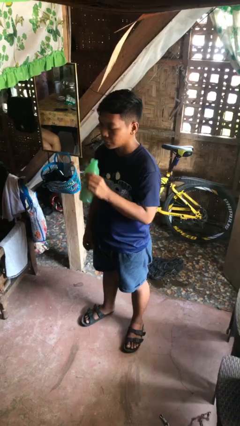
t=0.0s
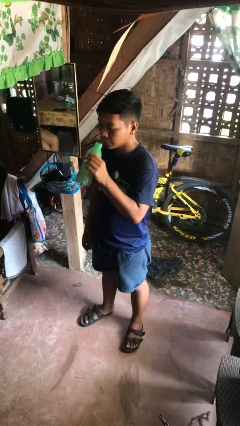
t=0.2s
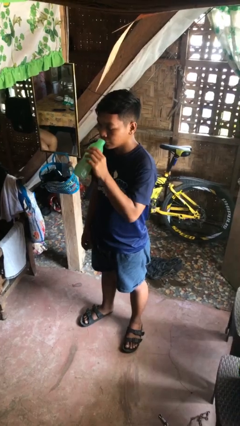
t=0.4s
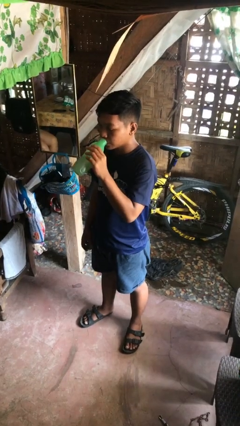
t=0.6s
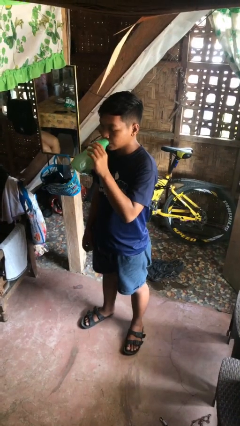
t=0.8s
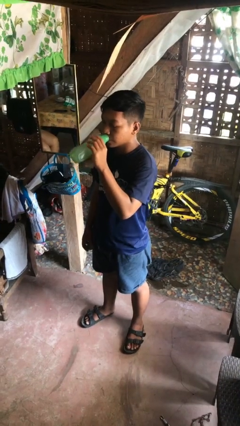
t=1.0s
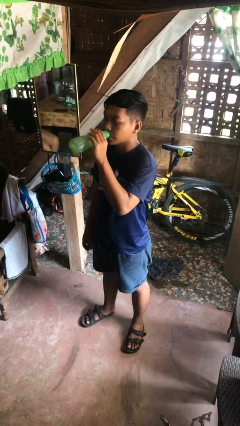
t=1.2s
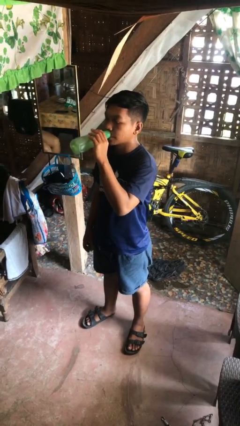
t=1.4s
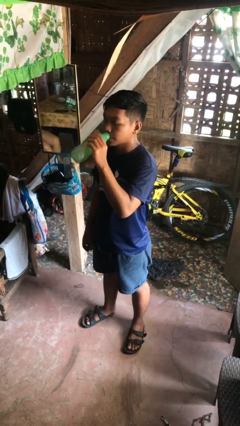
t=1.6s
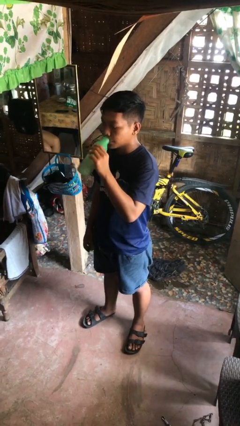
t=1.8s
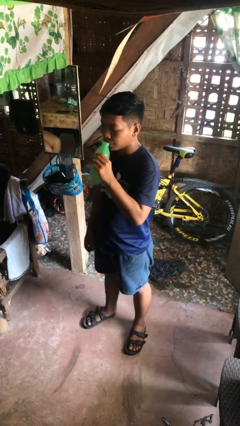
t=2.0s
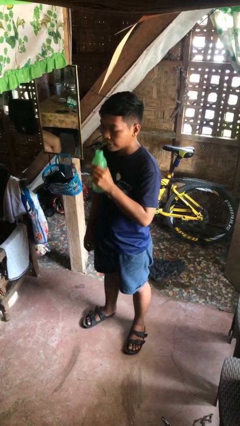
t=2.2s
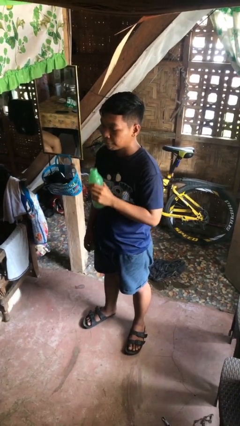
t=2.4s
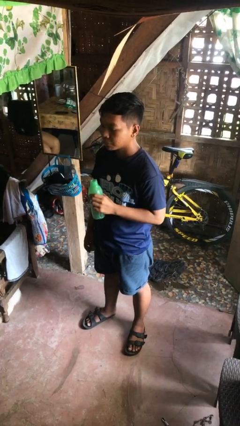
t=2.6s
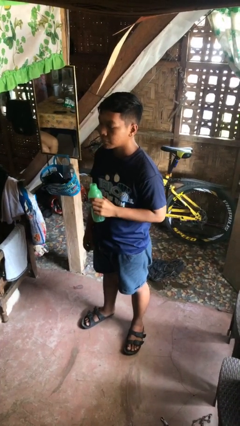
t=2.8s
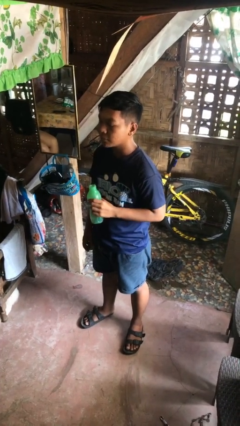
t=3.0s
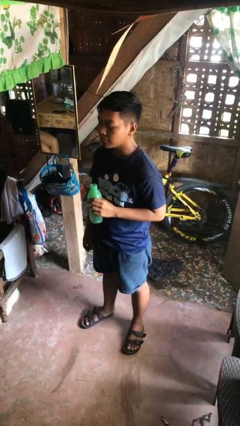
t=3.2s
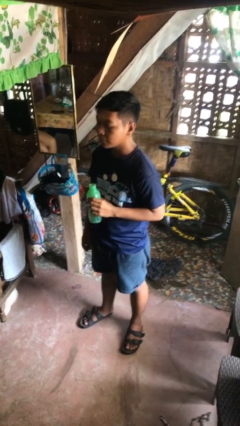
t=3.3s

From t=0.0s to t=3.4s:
person drinks from bottle

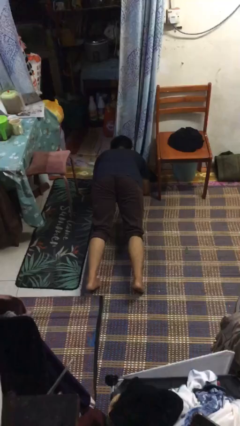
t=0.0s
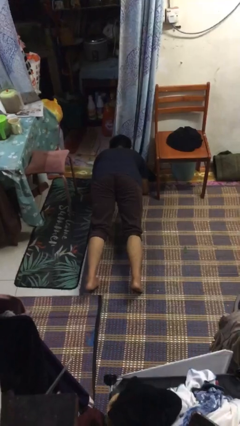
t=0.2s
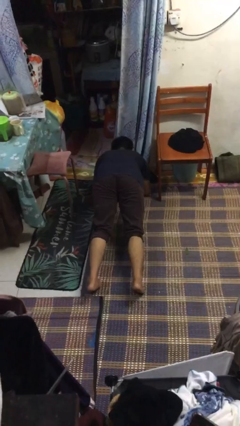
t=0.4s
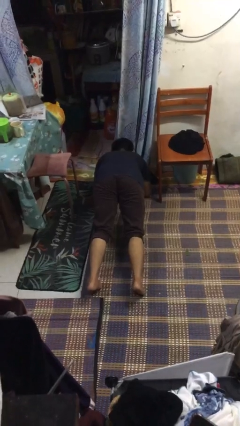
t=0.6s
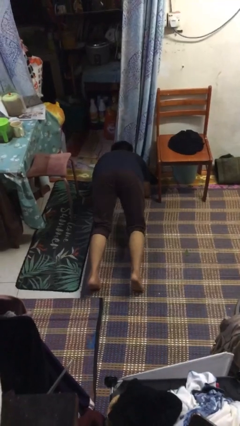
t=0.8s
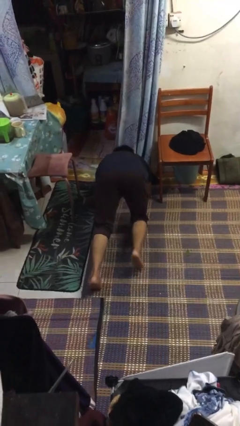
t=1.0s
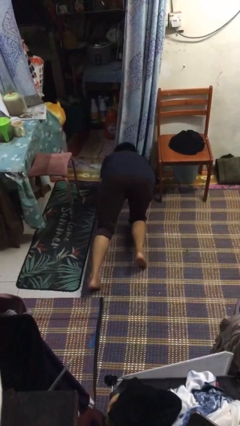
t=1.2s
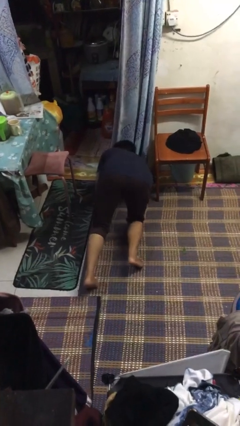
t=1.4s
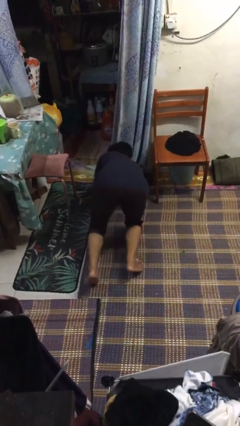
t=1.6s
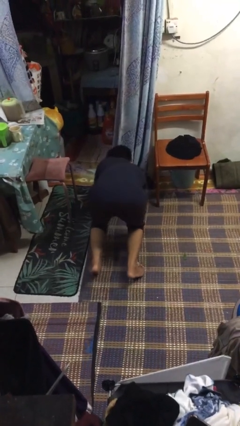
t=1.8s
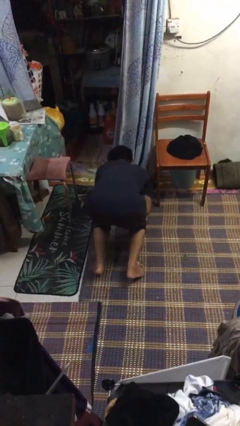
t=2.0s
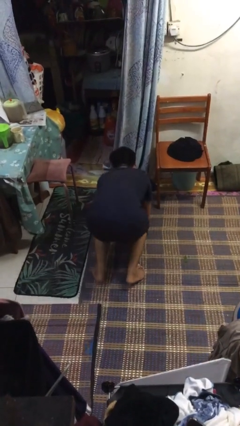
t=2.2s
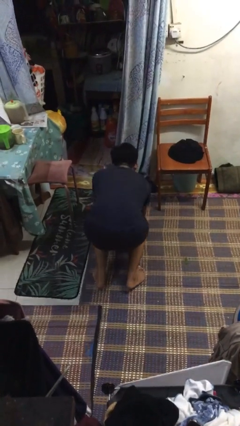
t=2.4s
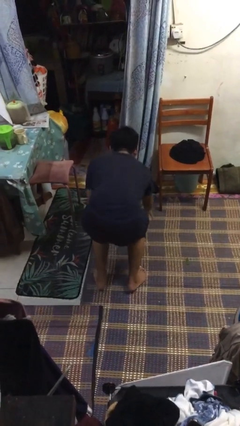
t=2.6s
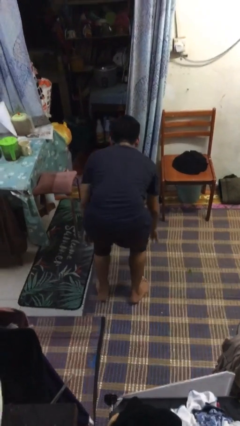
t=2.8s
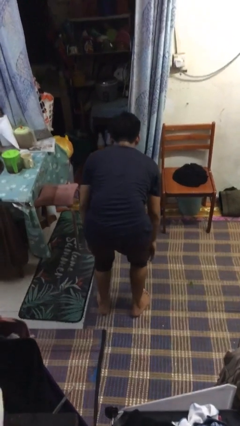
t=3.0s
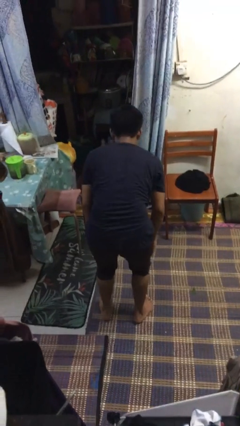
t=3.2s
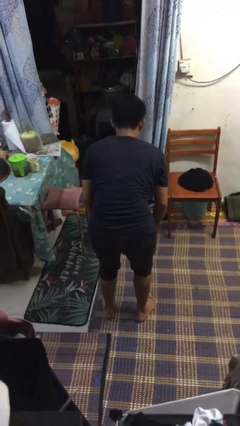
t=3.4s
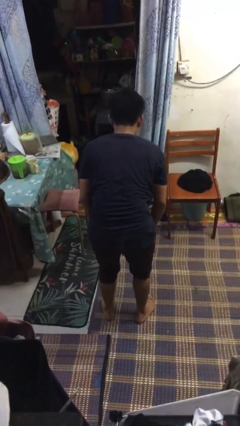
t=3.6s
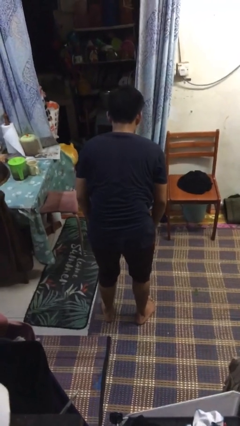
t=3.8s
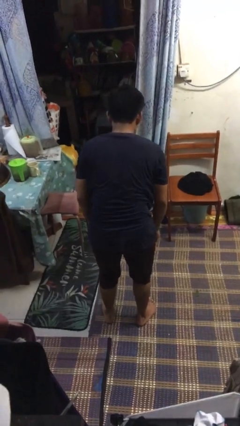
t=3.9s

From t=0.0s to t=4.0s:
person stands up from floor

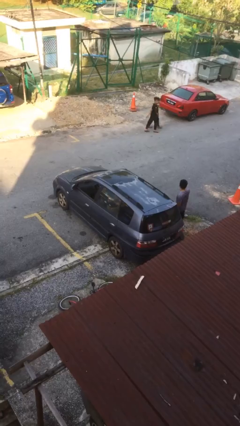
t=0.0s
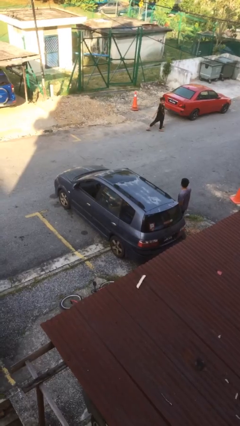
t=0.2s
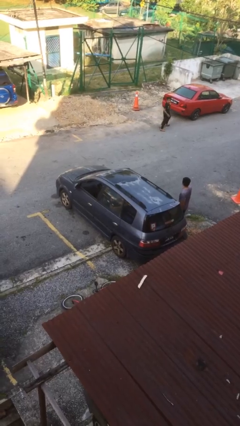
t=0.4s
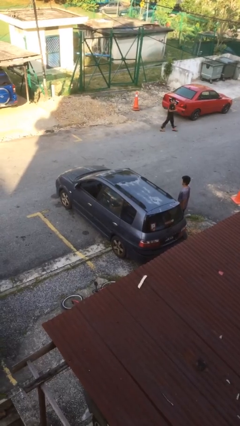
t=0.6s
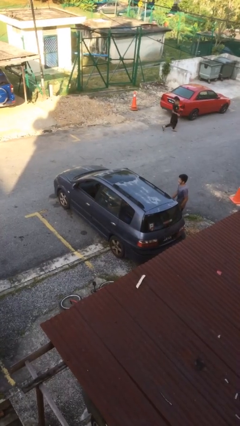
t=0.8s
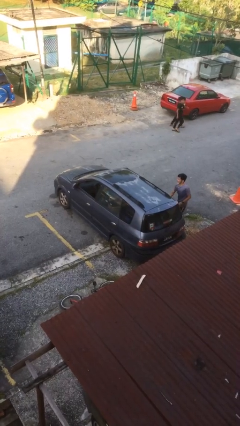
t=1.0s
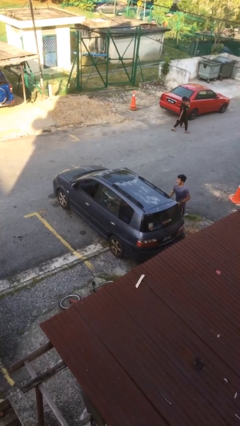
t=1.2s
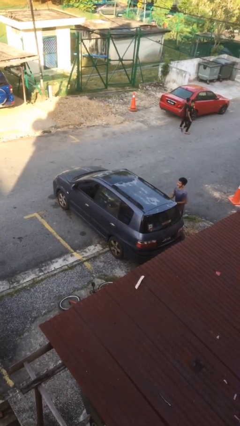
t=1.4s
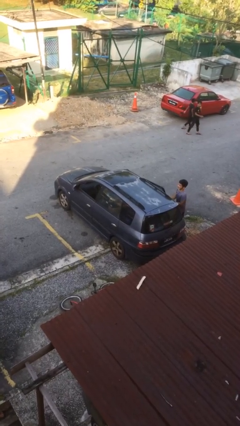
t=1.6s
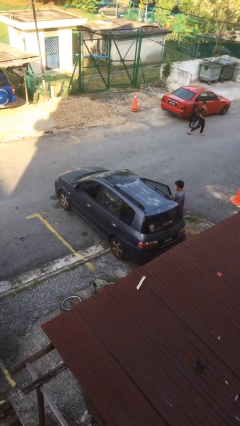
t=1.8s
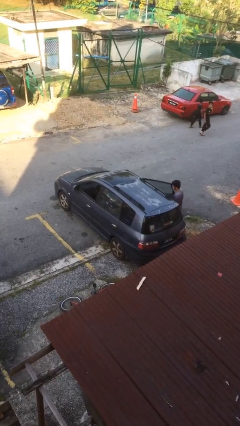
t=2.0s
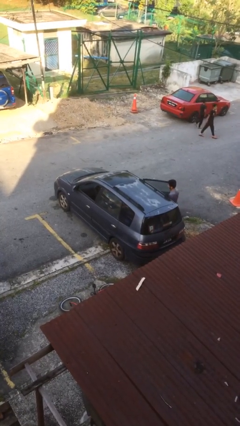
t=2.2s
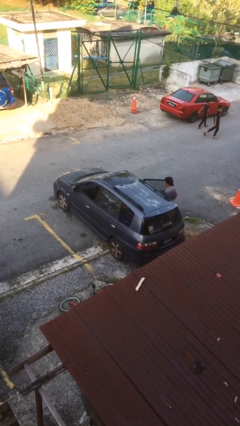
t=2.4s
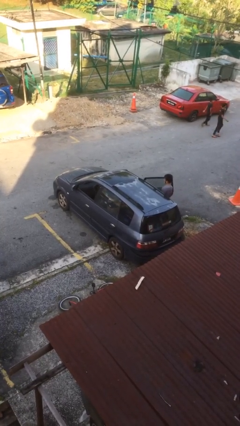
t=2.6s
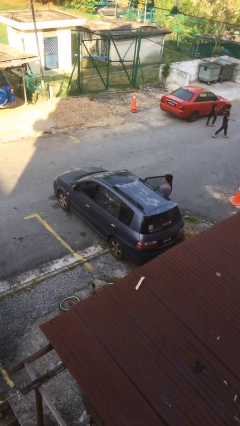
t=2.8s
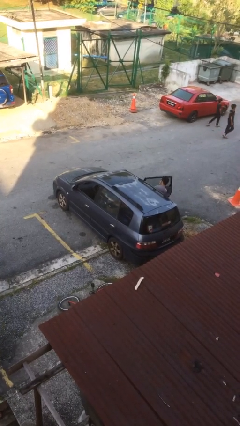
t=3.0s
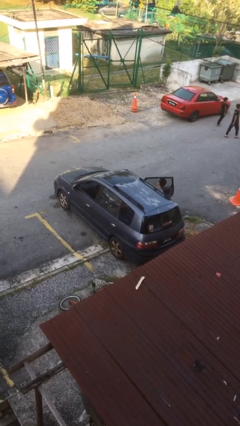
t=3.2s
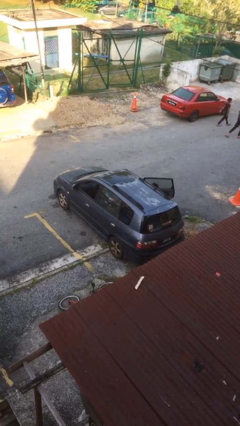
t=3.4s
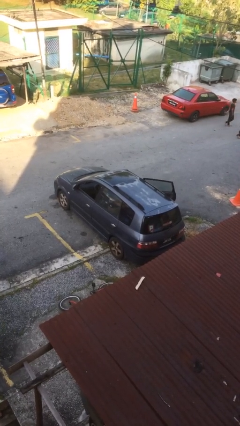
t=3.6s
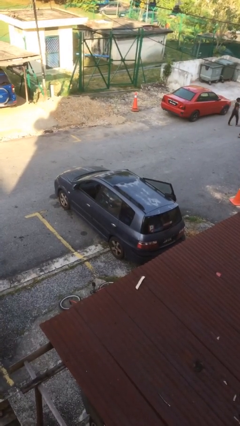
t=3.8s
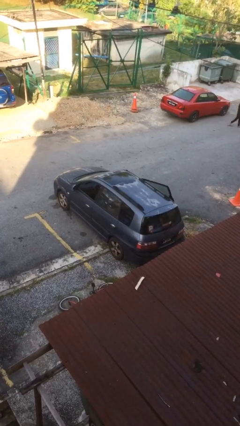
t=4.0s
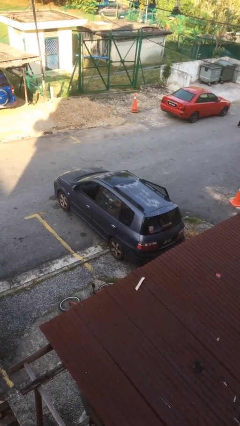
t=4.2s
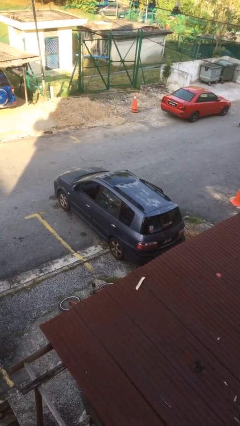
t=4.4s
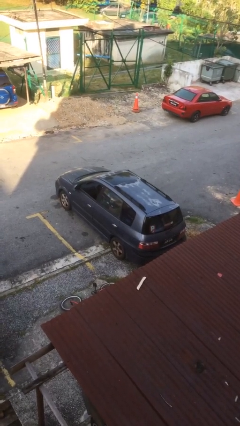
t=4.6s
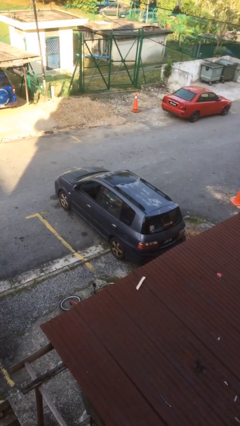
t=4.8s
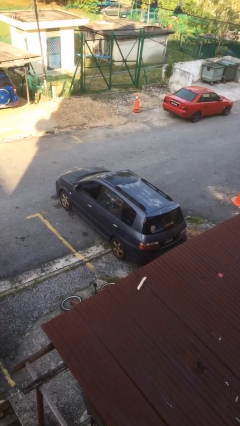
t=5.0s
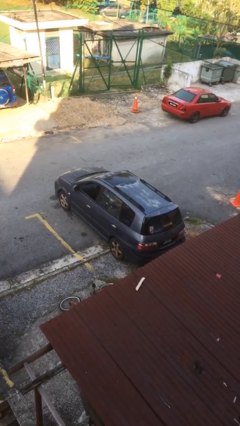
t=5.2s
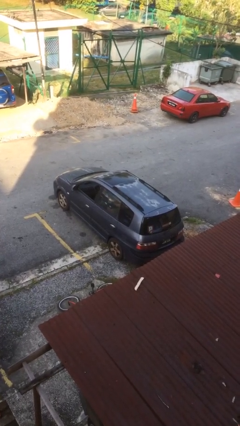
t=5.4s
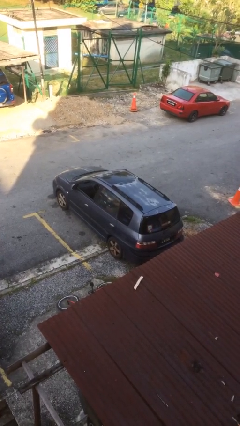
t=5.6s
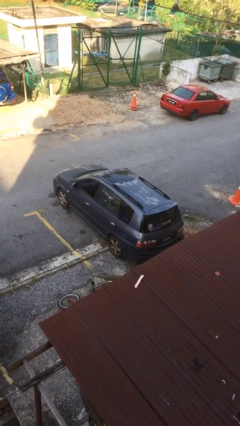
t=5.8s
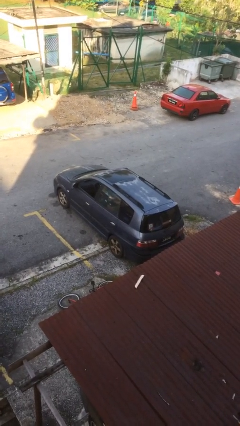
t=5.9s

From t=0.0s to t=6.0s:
car picks up person

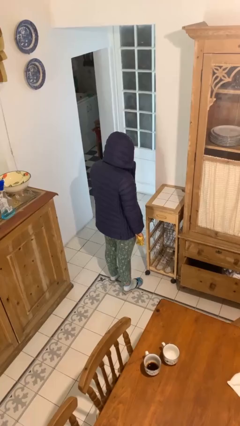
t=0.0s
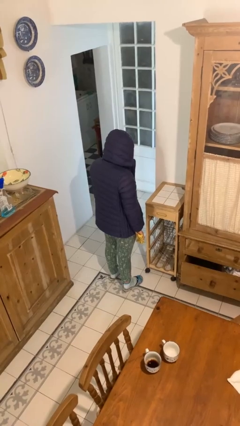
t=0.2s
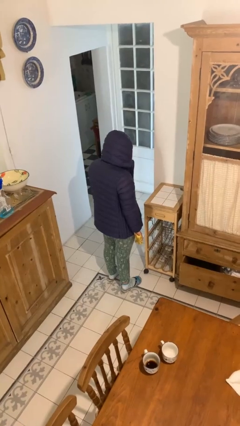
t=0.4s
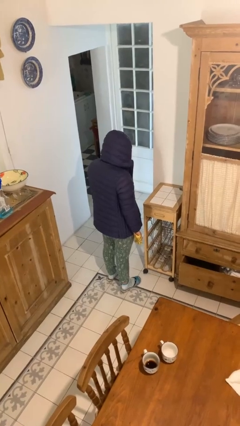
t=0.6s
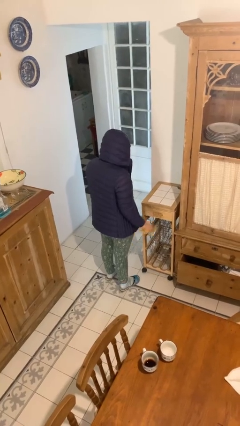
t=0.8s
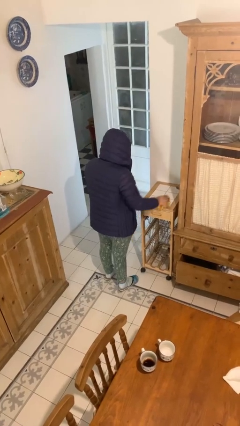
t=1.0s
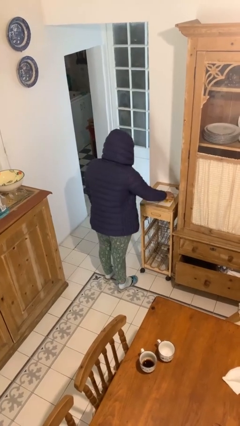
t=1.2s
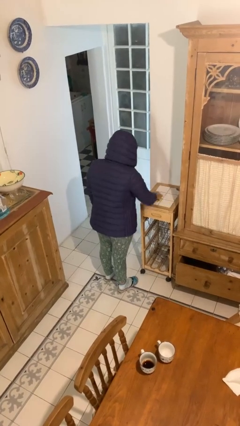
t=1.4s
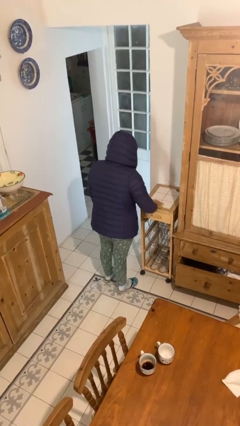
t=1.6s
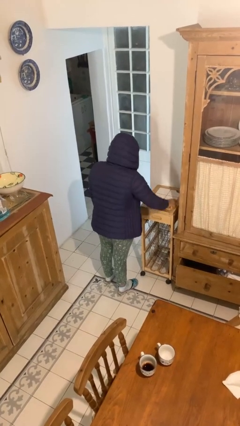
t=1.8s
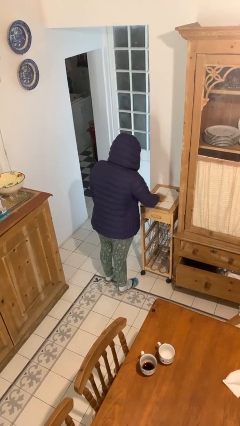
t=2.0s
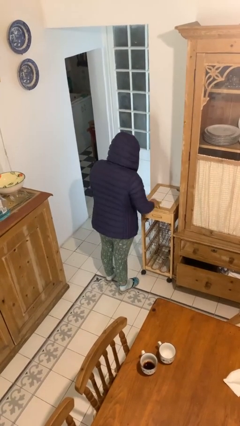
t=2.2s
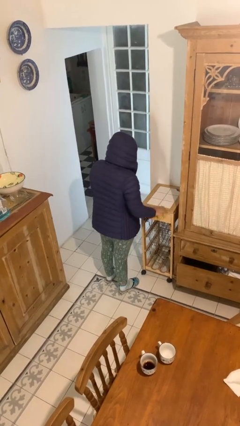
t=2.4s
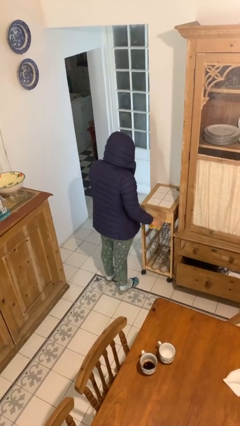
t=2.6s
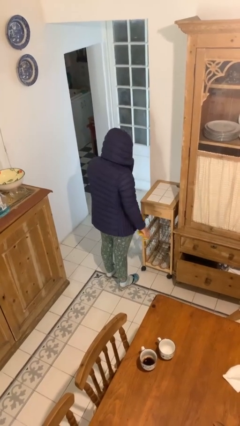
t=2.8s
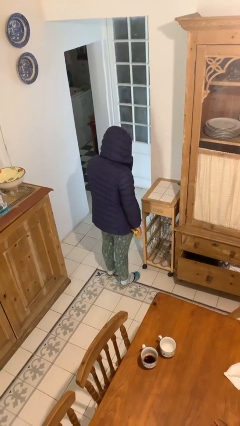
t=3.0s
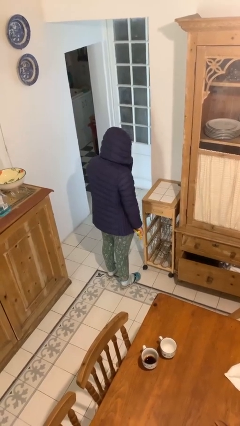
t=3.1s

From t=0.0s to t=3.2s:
person cleans table with rag

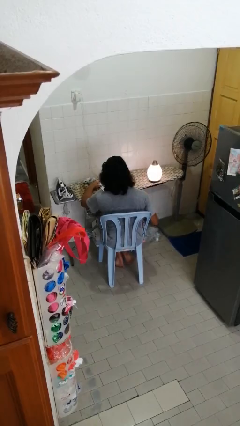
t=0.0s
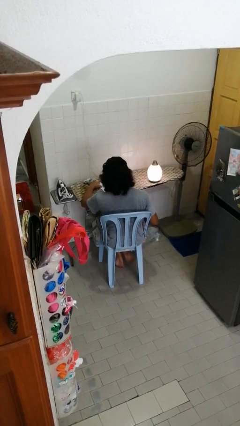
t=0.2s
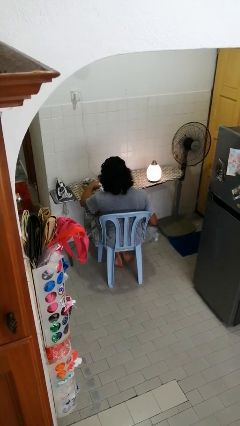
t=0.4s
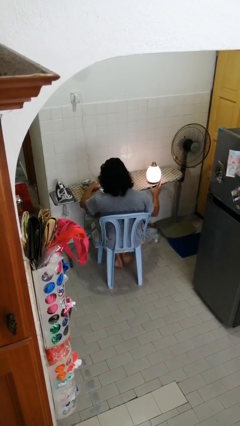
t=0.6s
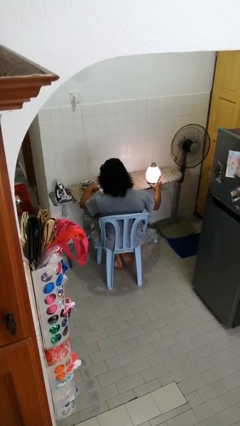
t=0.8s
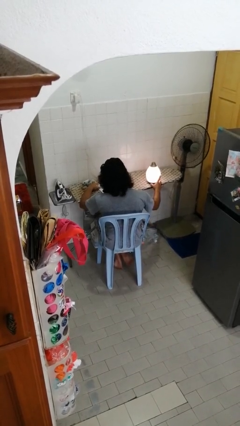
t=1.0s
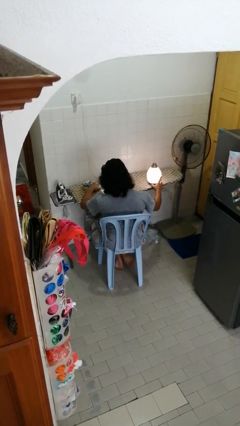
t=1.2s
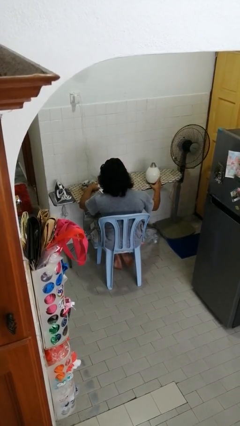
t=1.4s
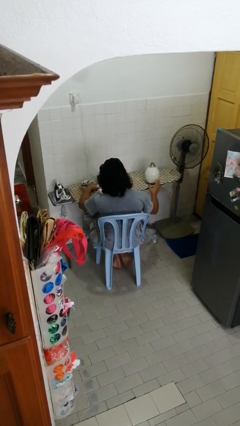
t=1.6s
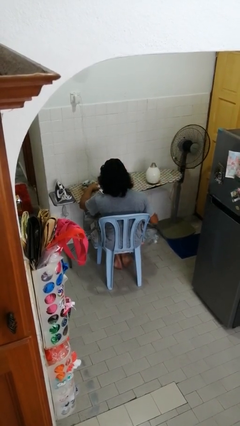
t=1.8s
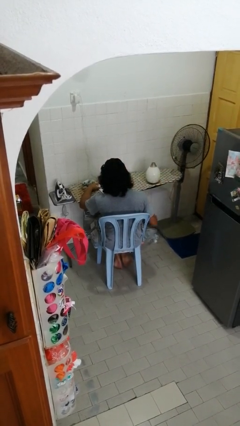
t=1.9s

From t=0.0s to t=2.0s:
person turns off lamp
